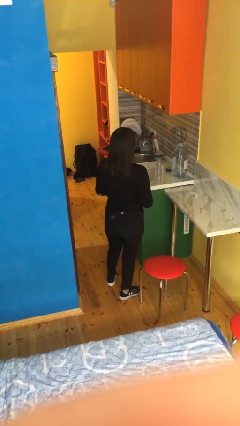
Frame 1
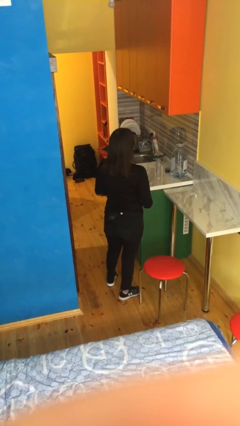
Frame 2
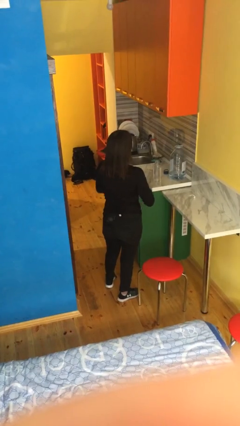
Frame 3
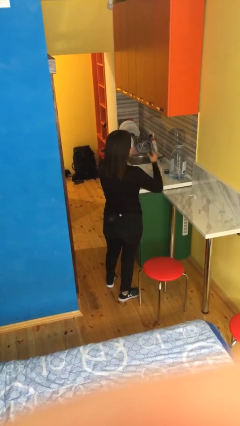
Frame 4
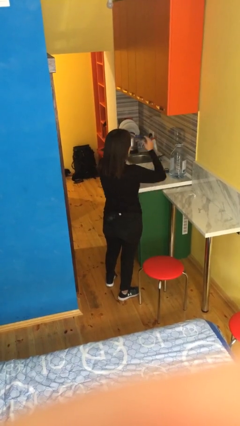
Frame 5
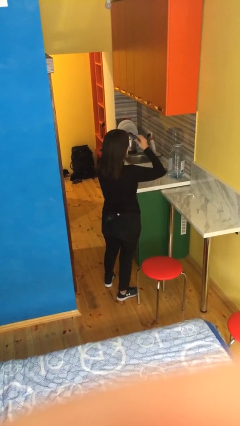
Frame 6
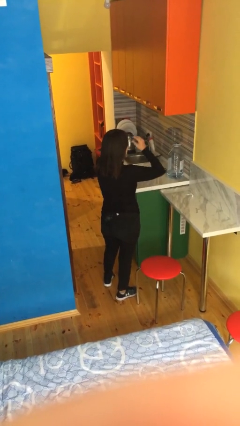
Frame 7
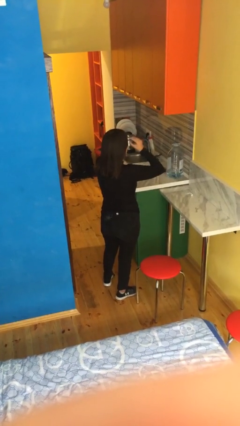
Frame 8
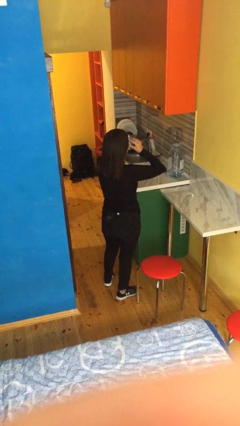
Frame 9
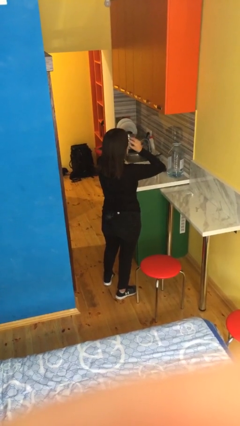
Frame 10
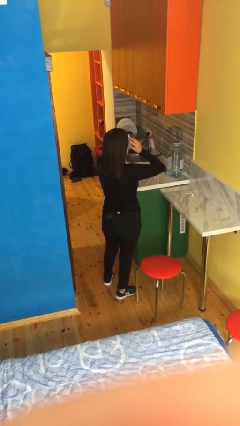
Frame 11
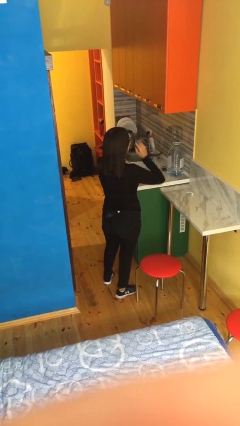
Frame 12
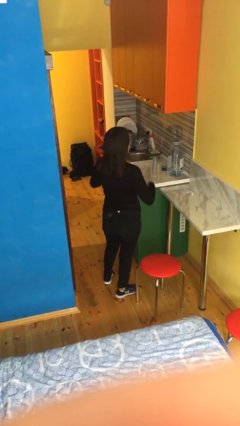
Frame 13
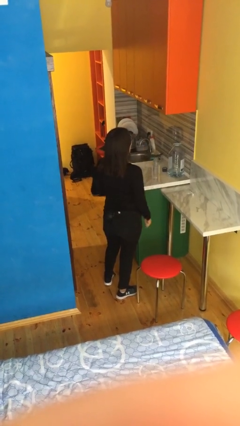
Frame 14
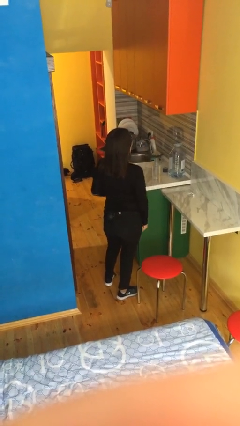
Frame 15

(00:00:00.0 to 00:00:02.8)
person puts on glasses

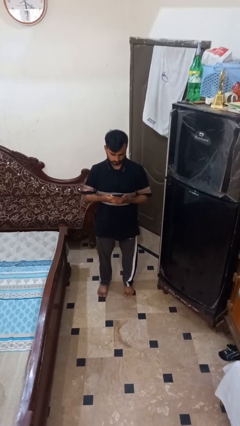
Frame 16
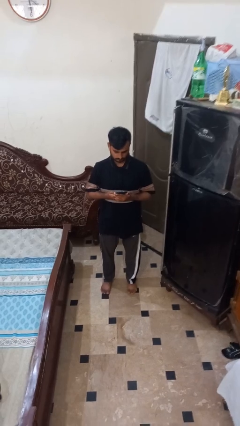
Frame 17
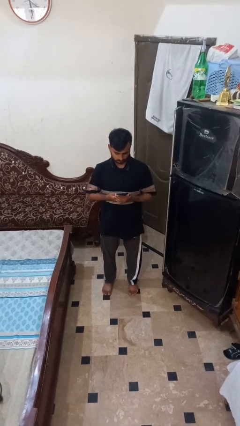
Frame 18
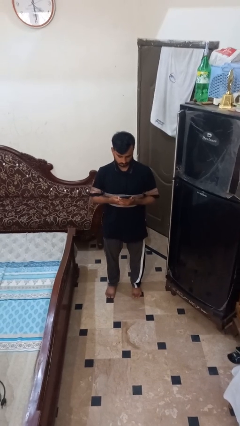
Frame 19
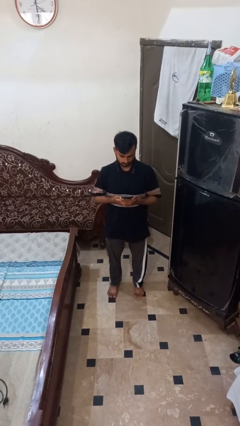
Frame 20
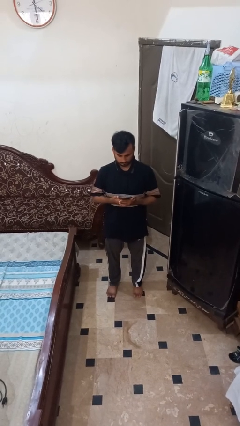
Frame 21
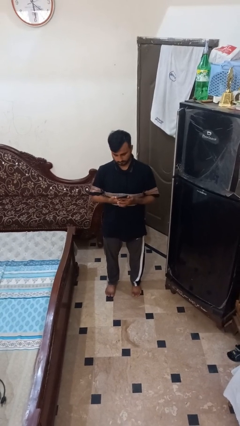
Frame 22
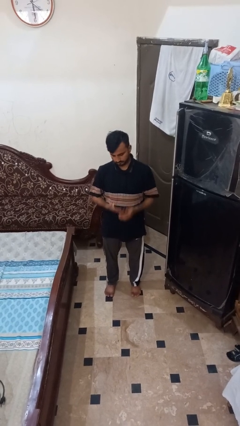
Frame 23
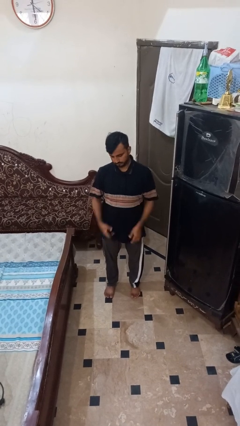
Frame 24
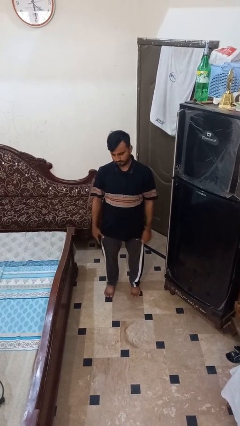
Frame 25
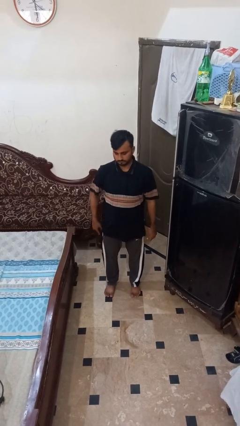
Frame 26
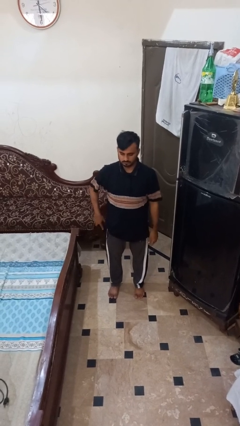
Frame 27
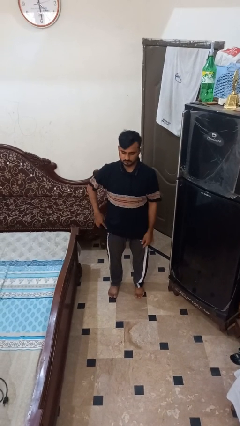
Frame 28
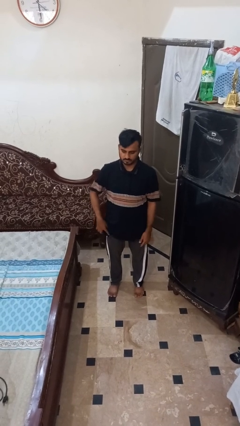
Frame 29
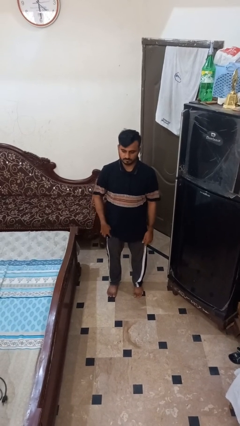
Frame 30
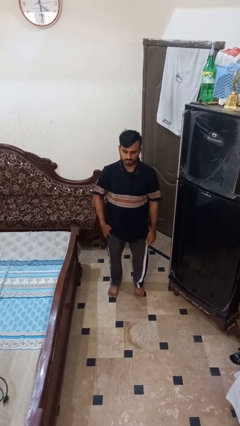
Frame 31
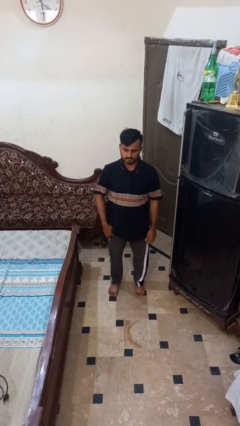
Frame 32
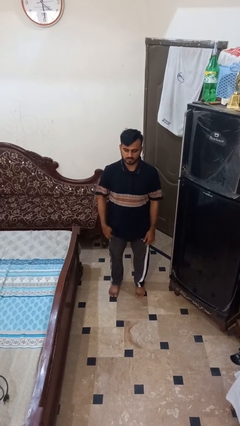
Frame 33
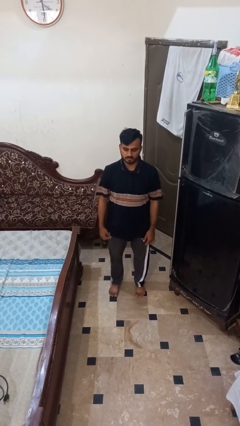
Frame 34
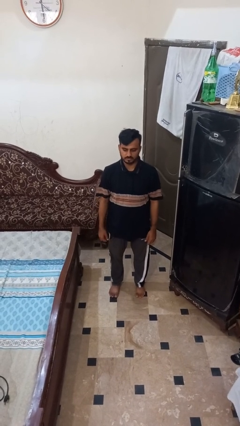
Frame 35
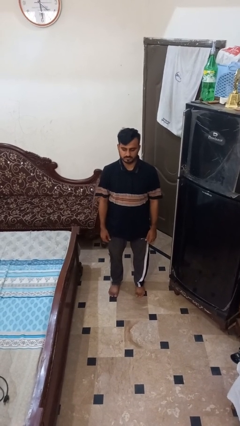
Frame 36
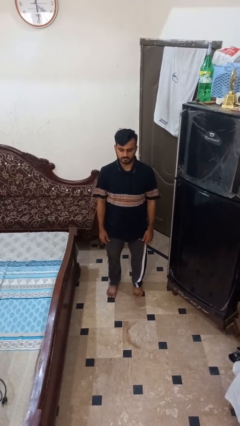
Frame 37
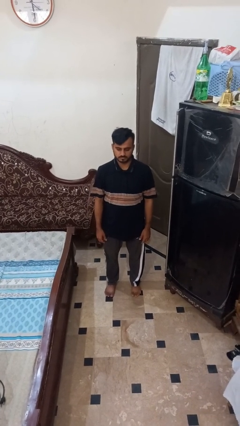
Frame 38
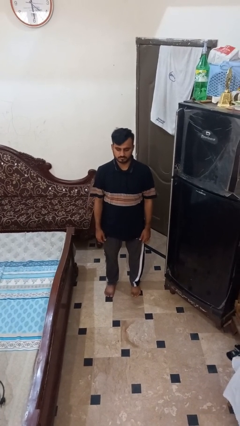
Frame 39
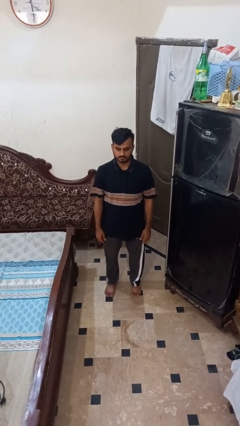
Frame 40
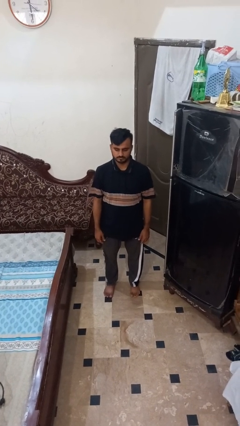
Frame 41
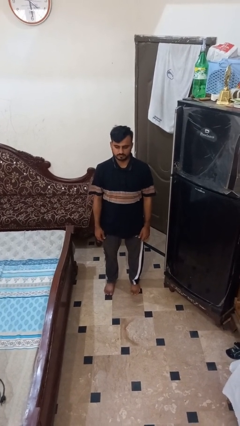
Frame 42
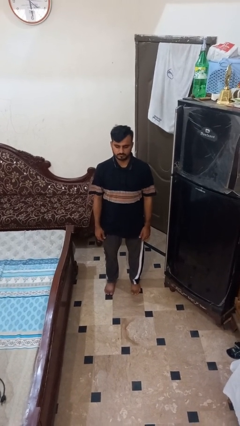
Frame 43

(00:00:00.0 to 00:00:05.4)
person puts phone into pocket

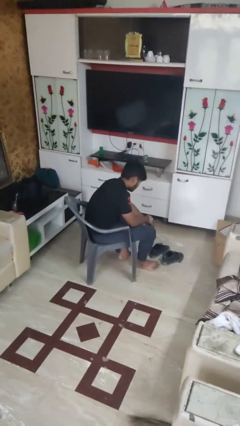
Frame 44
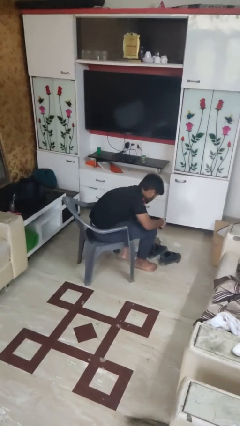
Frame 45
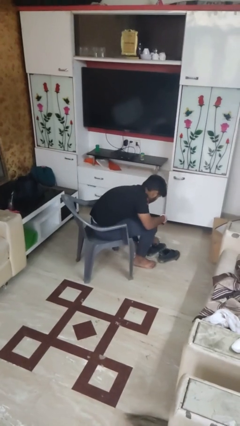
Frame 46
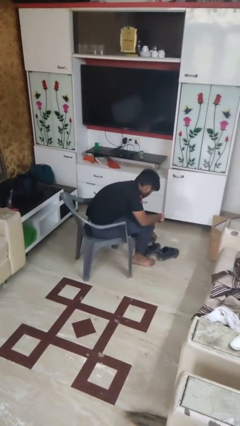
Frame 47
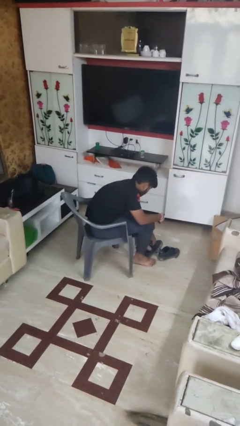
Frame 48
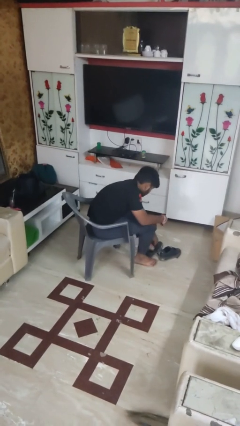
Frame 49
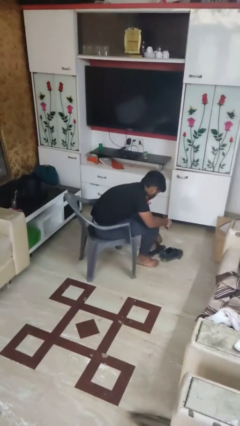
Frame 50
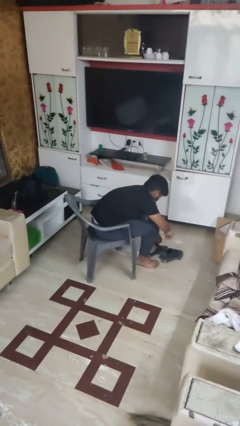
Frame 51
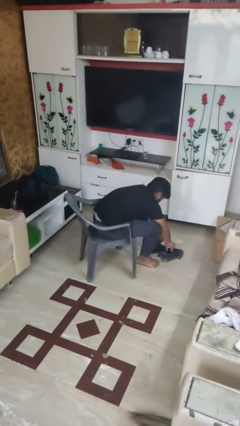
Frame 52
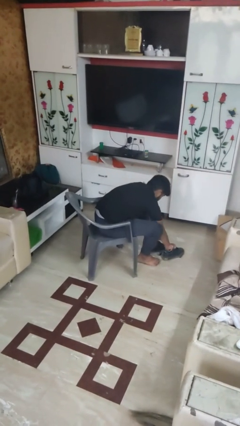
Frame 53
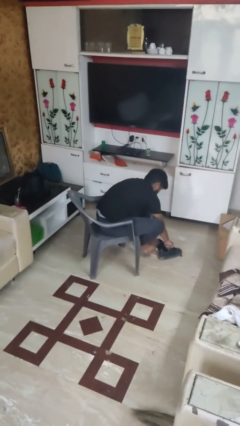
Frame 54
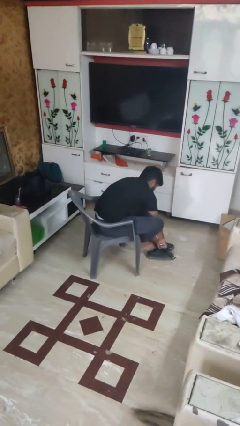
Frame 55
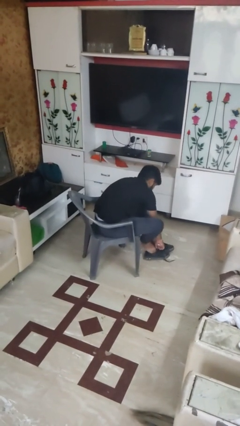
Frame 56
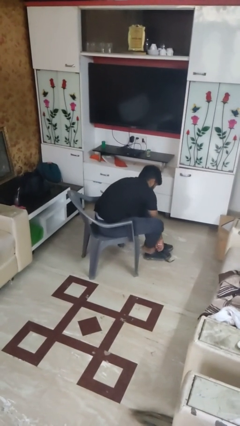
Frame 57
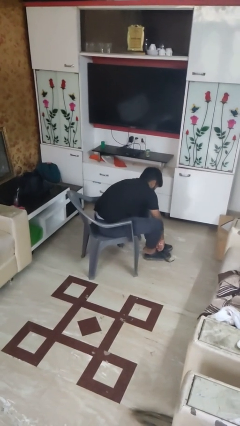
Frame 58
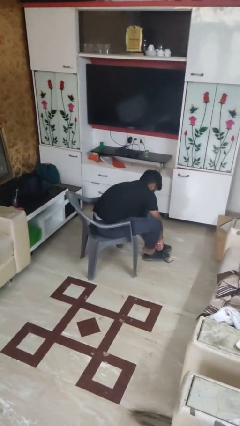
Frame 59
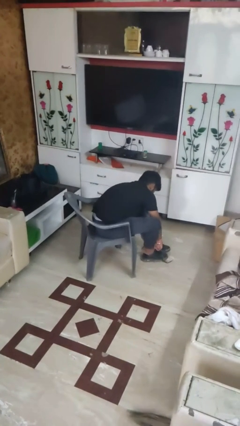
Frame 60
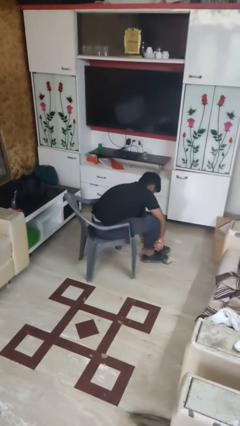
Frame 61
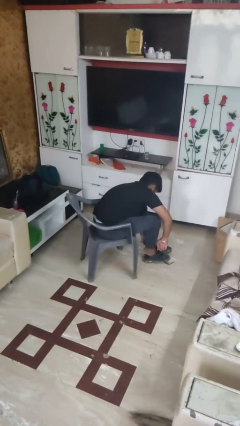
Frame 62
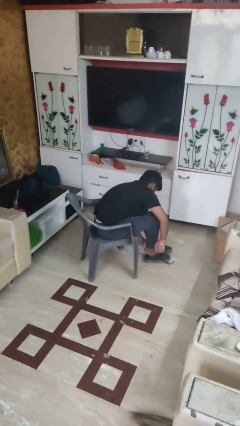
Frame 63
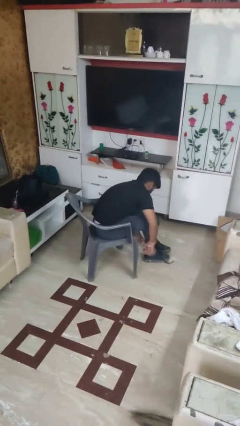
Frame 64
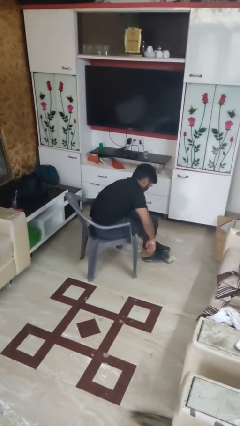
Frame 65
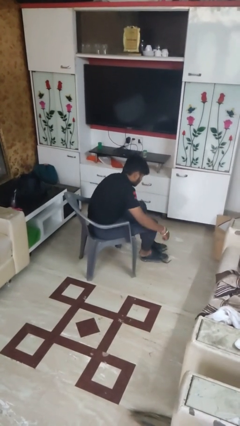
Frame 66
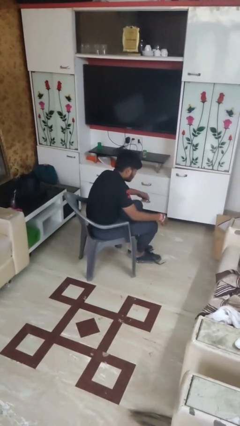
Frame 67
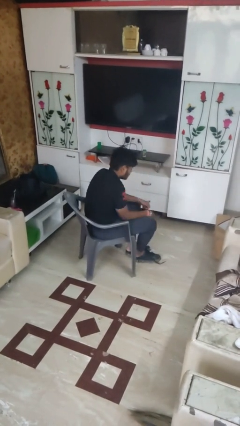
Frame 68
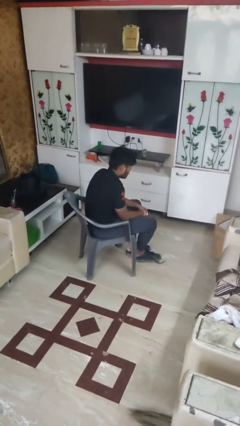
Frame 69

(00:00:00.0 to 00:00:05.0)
person puts on shoes

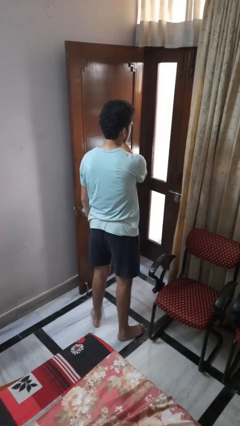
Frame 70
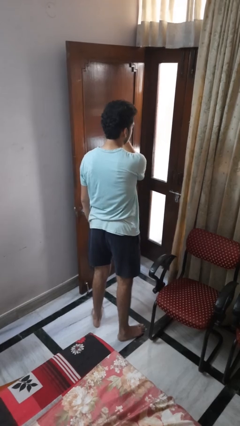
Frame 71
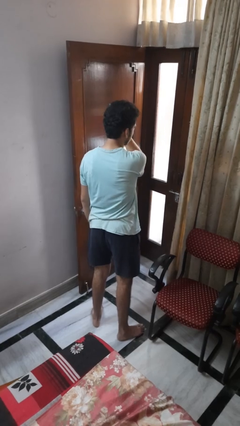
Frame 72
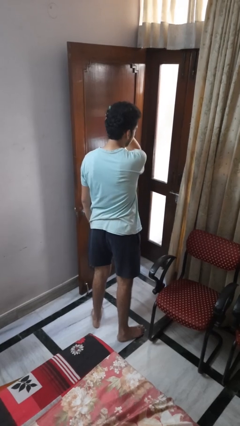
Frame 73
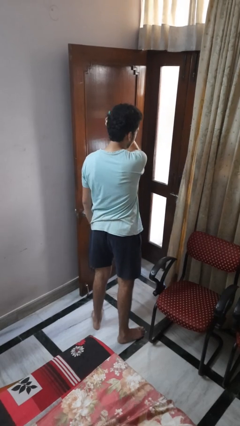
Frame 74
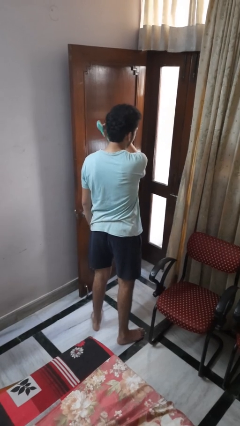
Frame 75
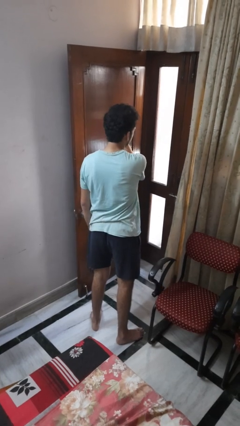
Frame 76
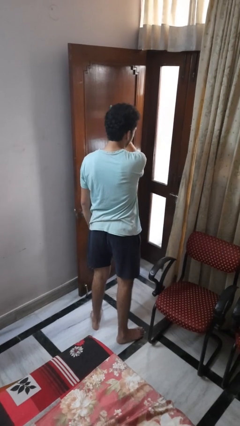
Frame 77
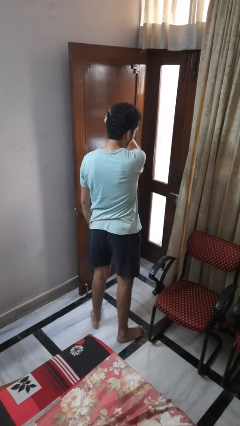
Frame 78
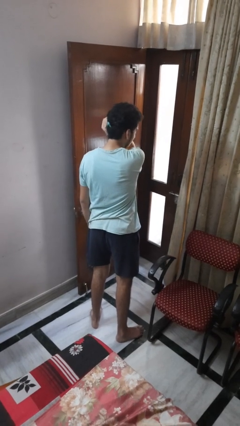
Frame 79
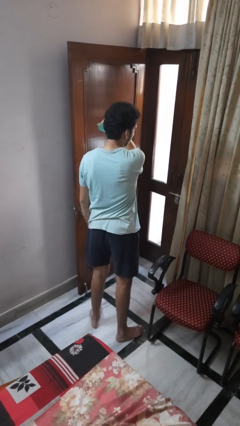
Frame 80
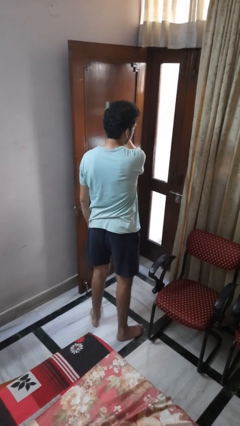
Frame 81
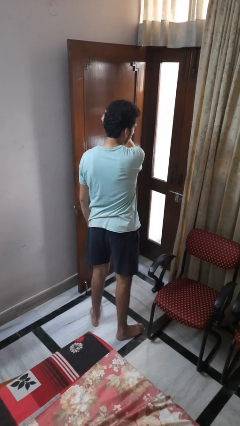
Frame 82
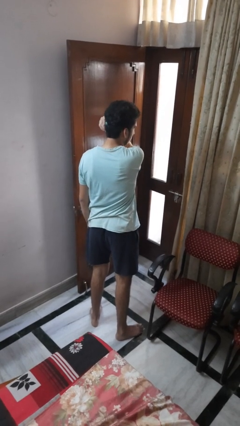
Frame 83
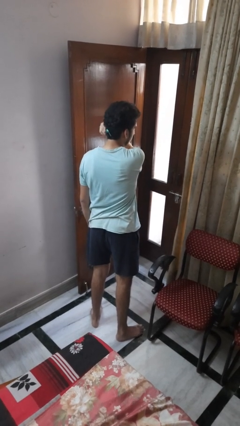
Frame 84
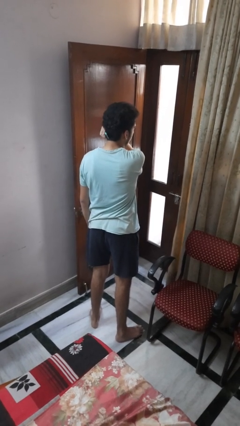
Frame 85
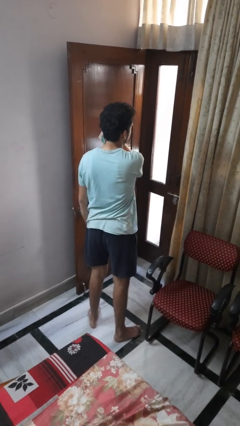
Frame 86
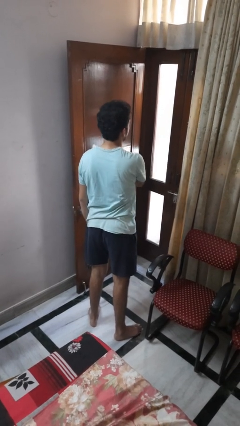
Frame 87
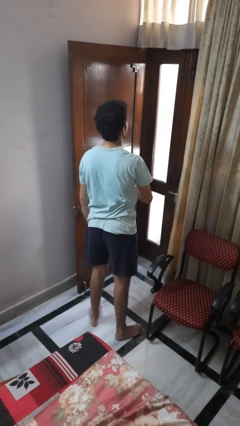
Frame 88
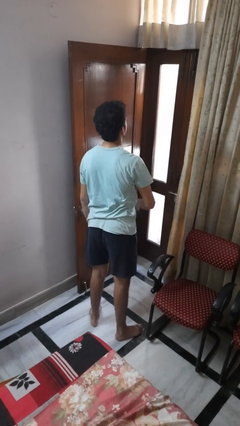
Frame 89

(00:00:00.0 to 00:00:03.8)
person brushes hair

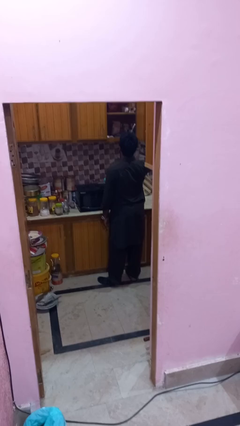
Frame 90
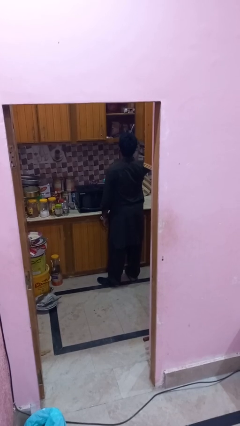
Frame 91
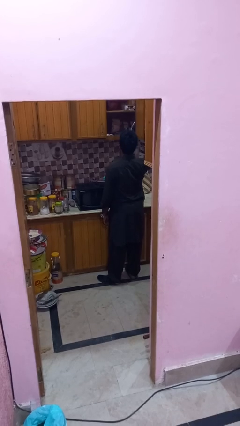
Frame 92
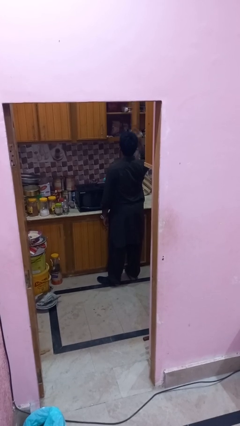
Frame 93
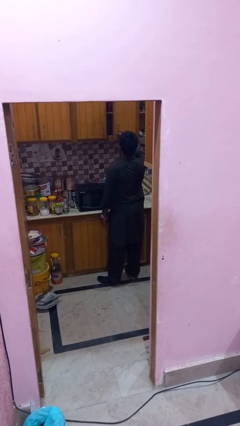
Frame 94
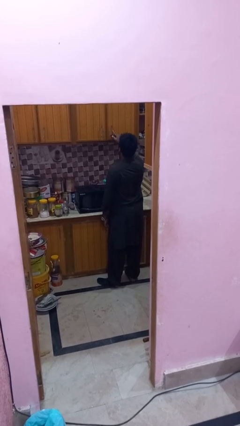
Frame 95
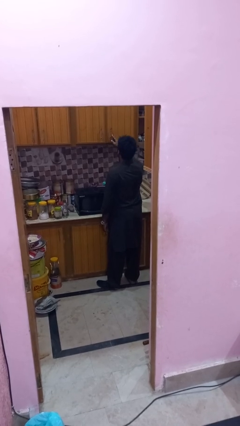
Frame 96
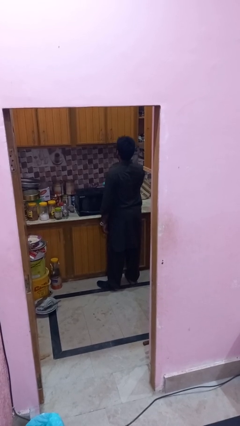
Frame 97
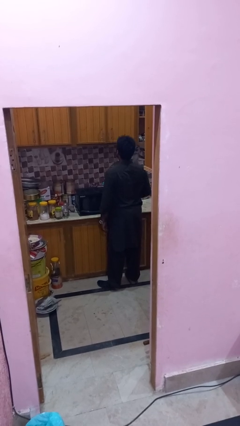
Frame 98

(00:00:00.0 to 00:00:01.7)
person closes cabinet
